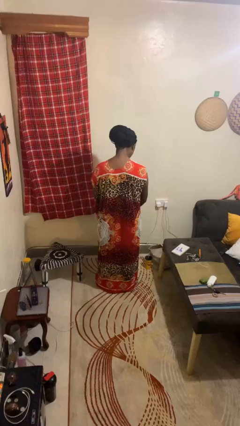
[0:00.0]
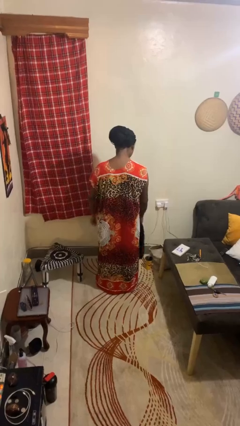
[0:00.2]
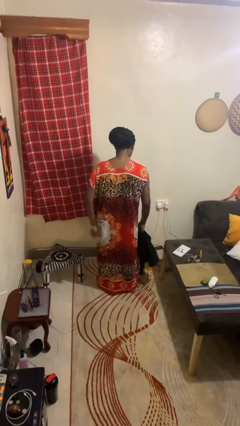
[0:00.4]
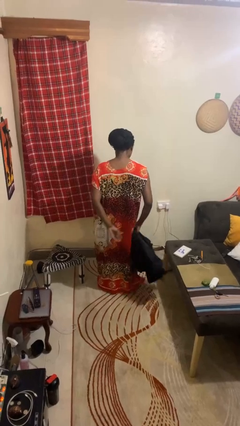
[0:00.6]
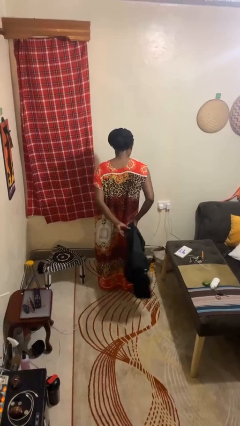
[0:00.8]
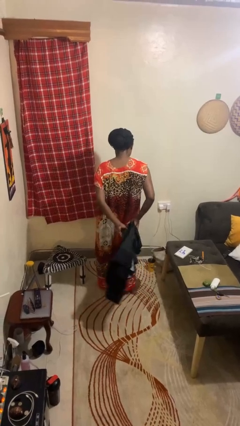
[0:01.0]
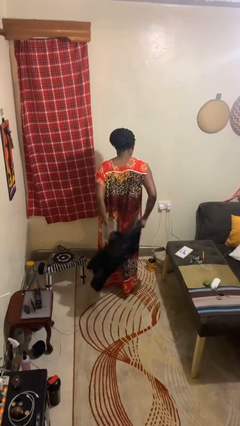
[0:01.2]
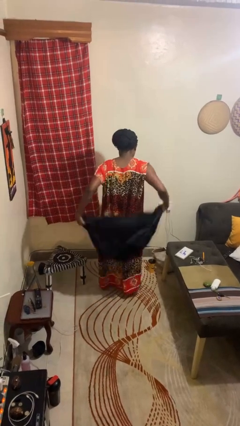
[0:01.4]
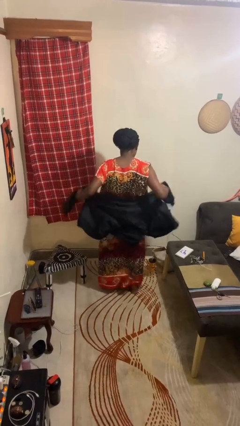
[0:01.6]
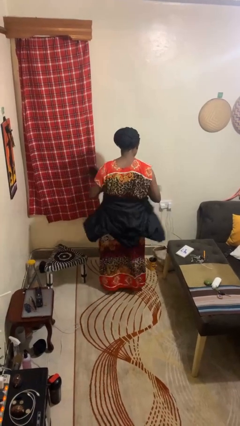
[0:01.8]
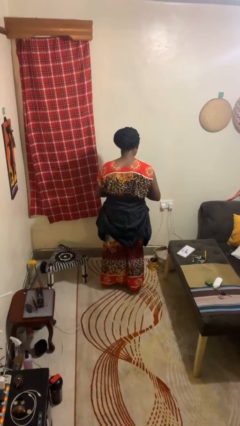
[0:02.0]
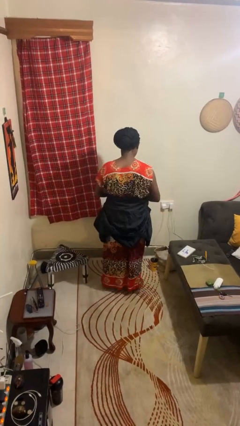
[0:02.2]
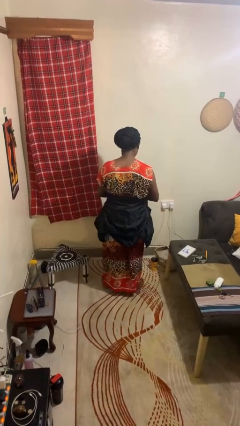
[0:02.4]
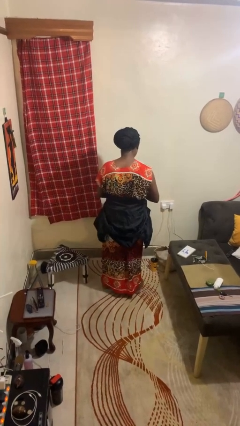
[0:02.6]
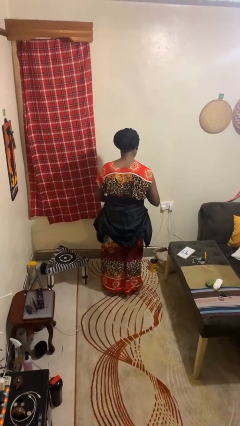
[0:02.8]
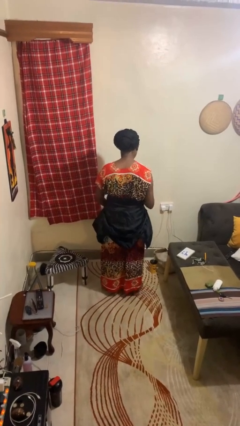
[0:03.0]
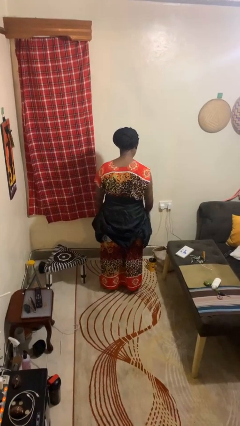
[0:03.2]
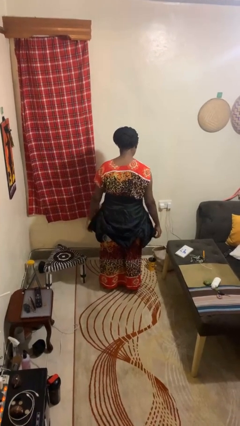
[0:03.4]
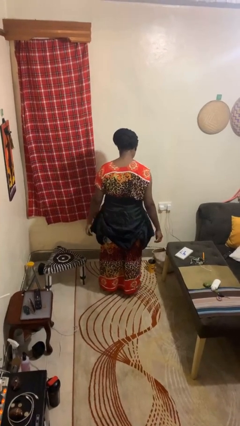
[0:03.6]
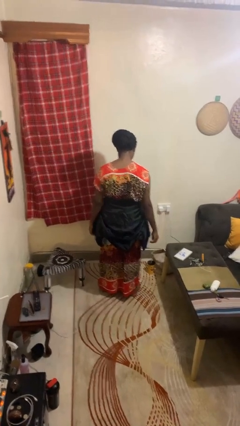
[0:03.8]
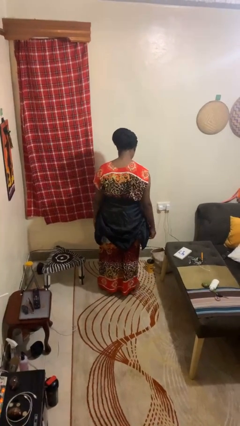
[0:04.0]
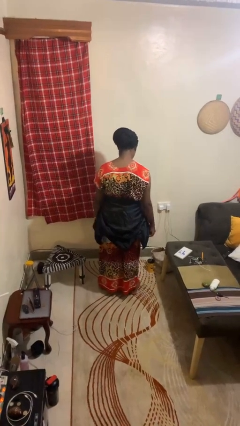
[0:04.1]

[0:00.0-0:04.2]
person ties jacket around waist

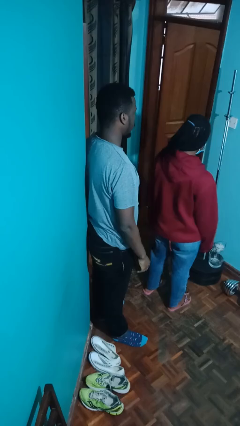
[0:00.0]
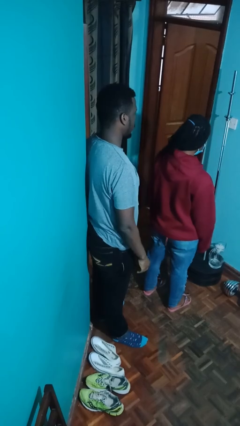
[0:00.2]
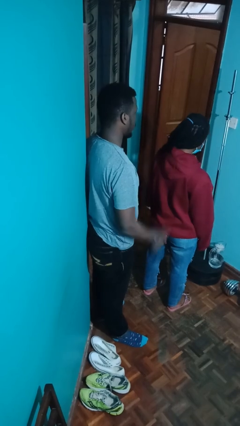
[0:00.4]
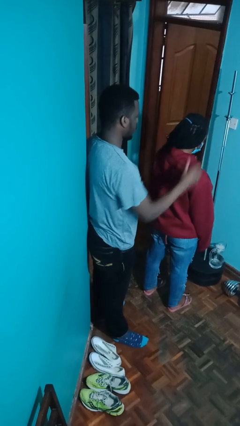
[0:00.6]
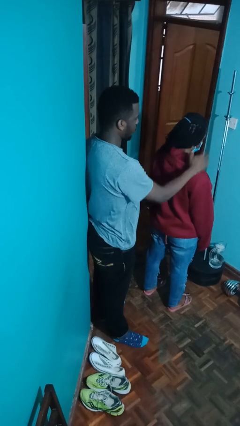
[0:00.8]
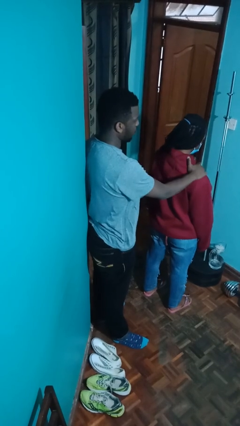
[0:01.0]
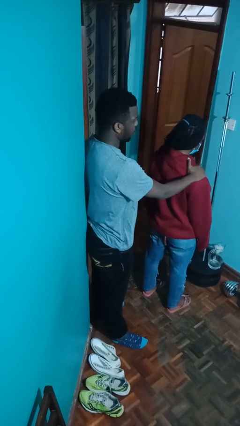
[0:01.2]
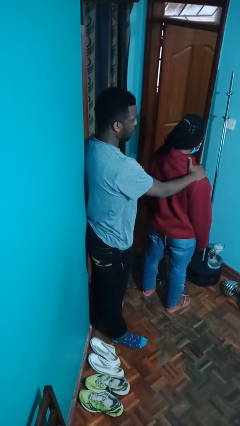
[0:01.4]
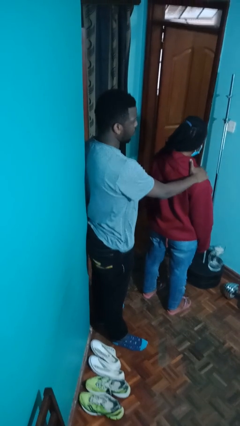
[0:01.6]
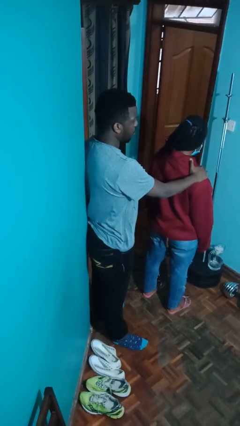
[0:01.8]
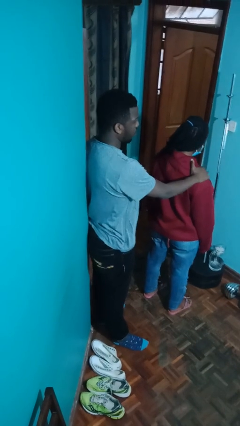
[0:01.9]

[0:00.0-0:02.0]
person grabs person by shoulder

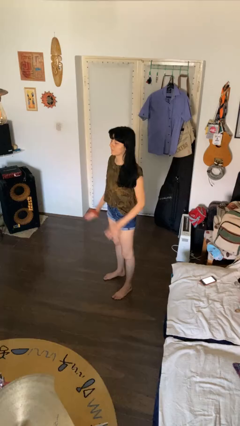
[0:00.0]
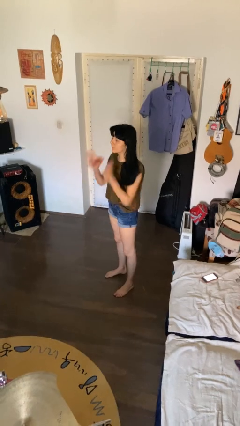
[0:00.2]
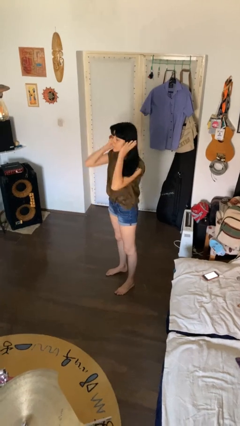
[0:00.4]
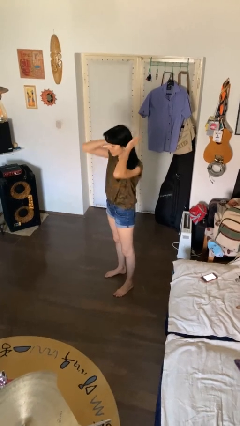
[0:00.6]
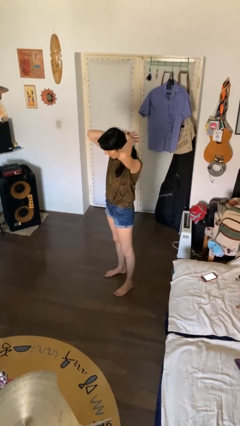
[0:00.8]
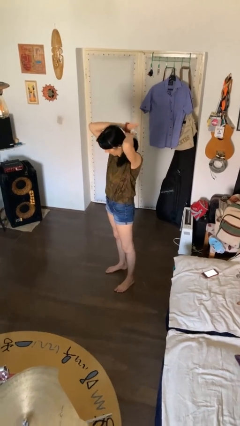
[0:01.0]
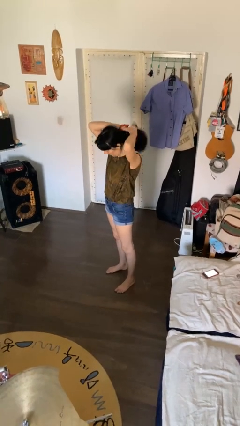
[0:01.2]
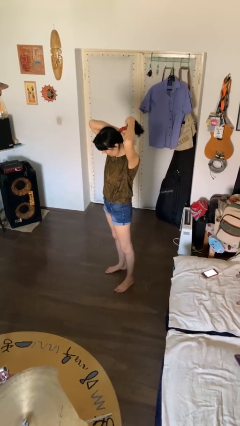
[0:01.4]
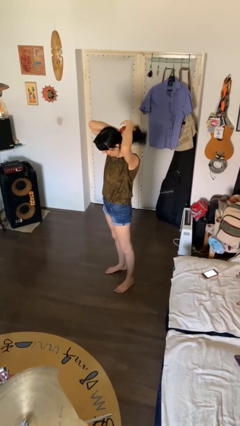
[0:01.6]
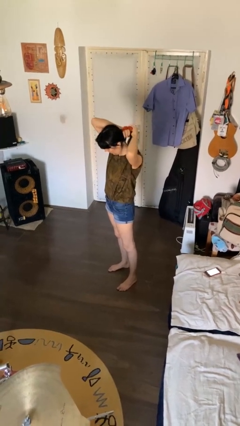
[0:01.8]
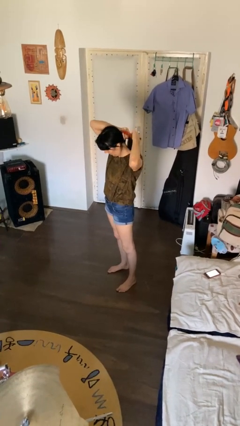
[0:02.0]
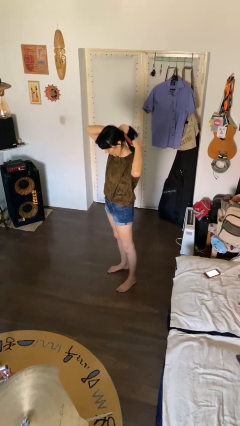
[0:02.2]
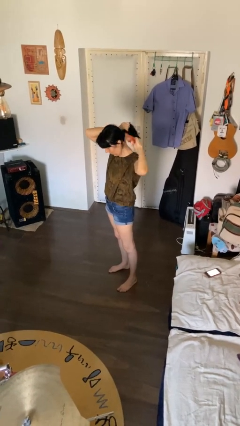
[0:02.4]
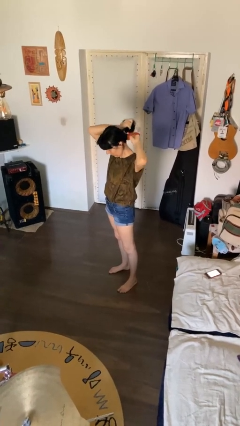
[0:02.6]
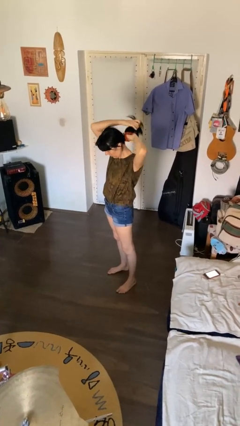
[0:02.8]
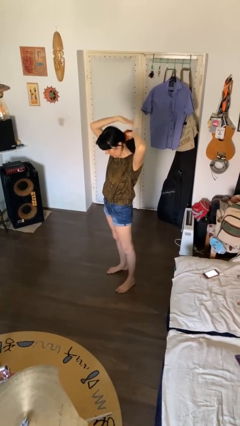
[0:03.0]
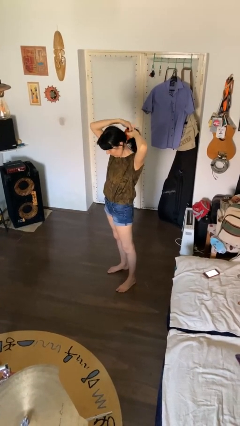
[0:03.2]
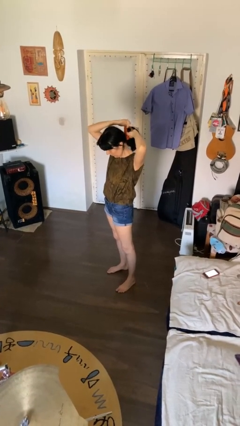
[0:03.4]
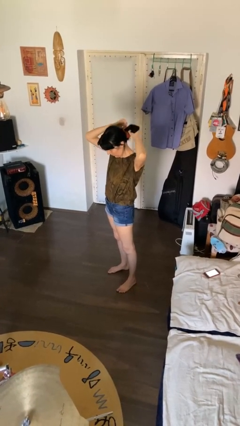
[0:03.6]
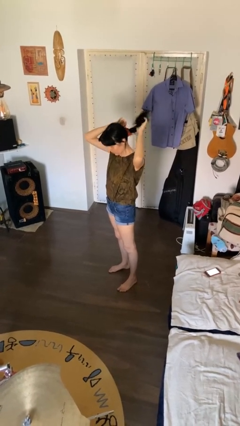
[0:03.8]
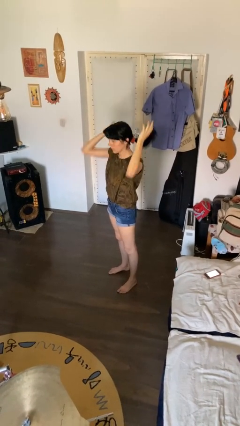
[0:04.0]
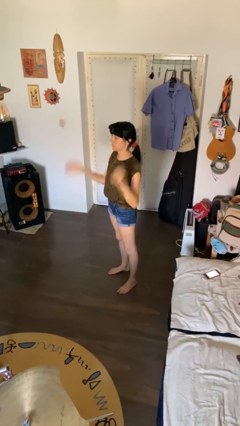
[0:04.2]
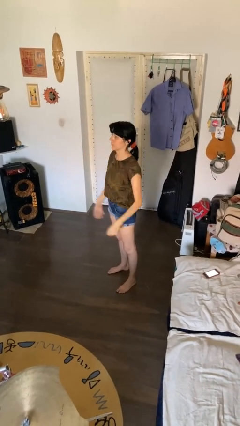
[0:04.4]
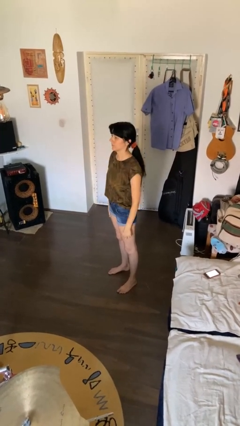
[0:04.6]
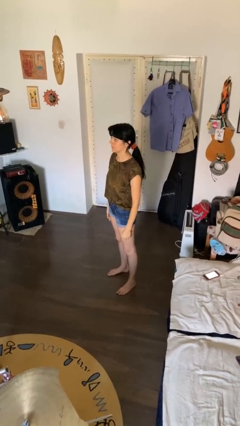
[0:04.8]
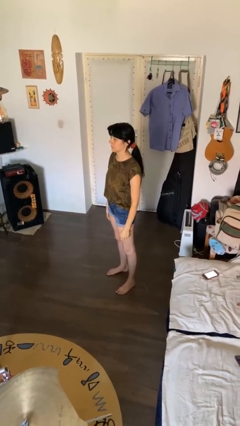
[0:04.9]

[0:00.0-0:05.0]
person puts hair in ponytail

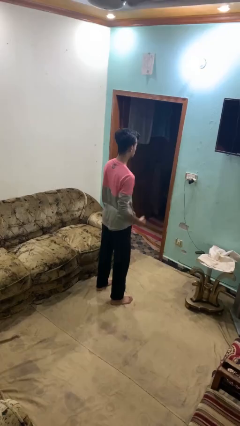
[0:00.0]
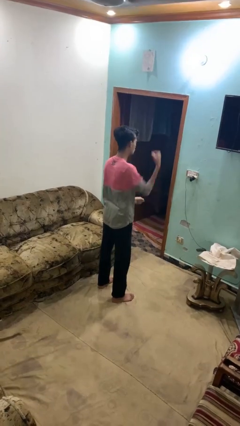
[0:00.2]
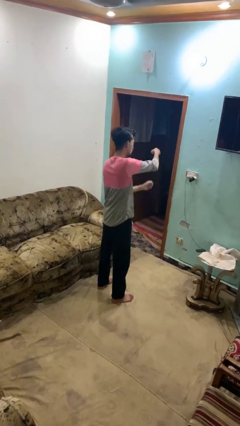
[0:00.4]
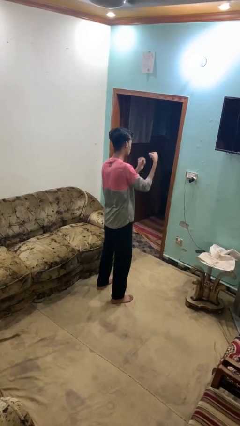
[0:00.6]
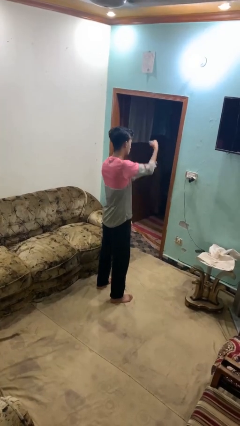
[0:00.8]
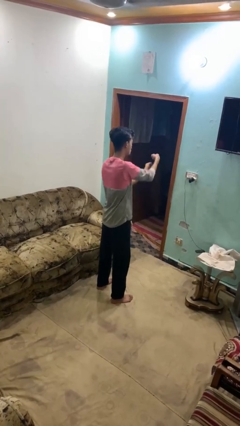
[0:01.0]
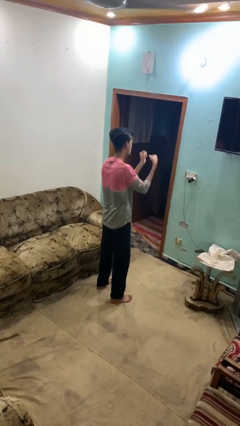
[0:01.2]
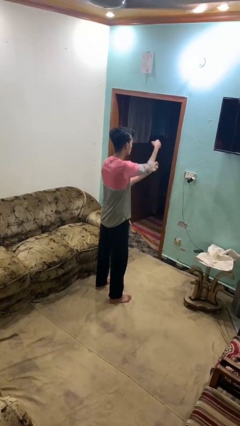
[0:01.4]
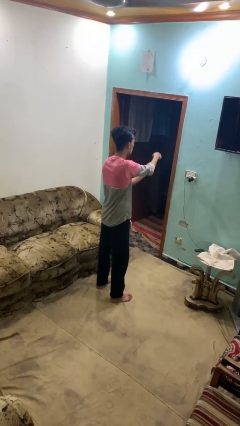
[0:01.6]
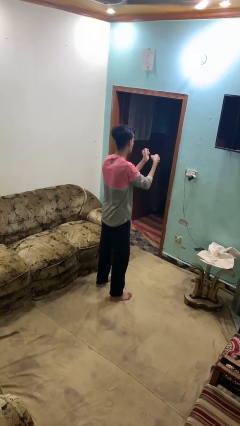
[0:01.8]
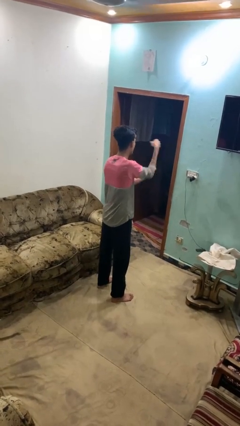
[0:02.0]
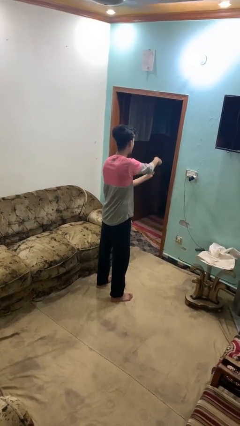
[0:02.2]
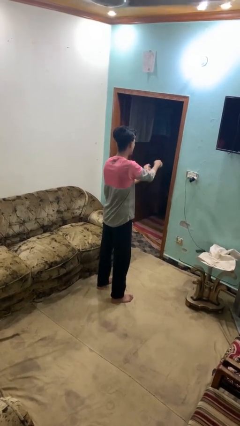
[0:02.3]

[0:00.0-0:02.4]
person punches

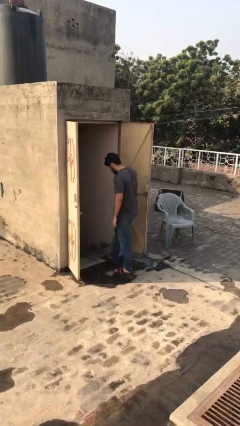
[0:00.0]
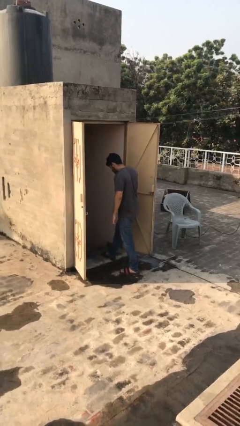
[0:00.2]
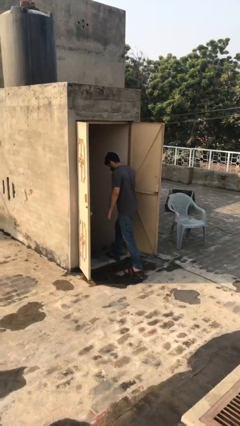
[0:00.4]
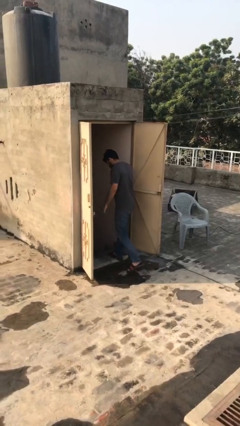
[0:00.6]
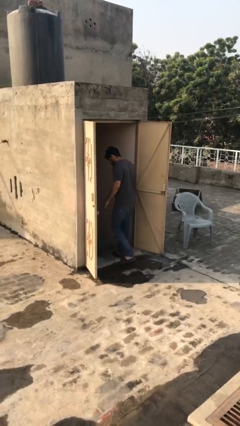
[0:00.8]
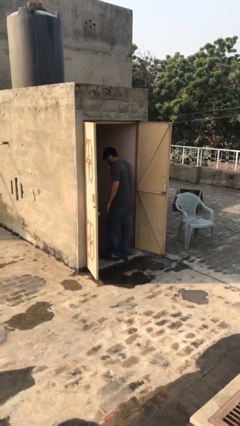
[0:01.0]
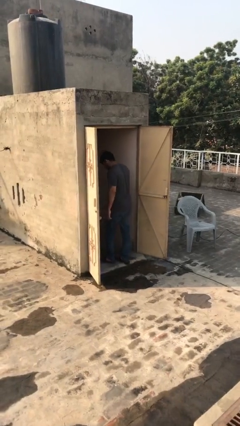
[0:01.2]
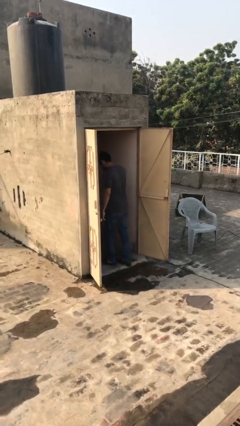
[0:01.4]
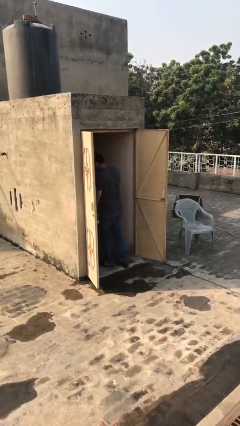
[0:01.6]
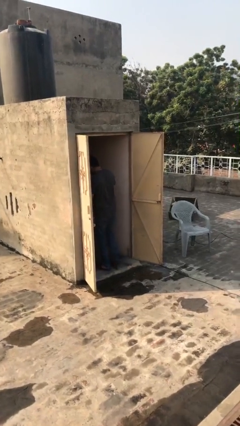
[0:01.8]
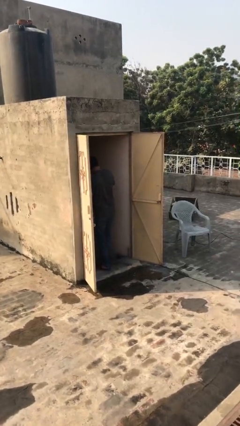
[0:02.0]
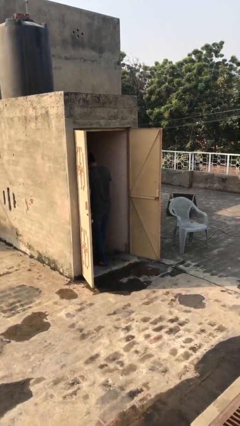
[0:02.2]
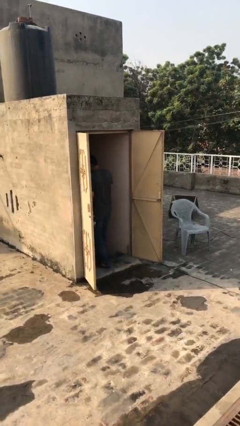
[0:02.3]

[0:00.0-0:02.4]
person exits scene through structure

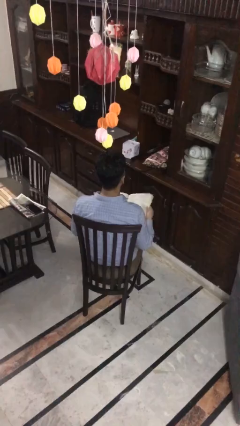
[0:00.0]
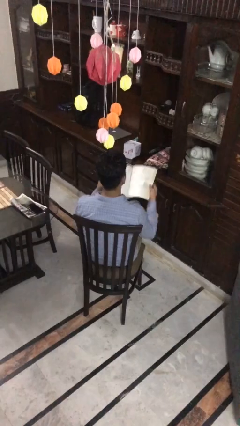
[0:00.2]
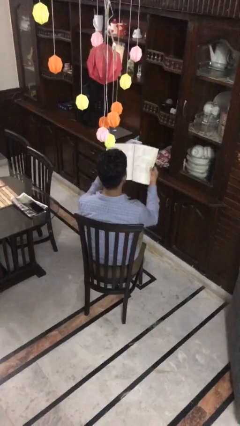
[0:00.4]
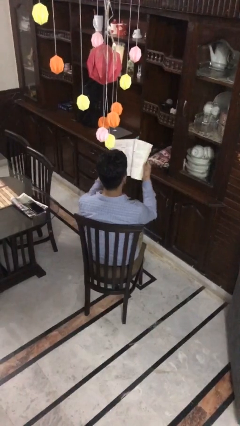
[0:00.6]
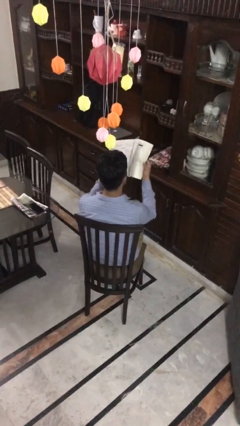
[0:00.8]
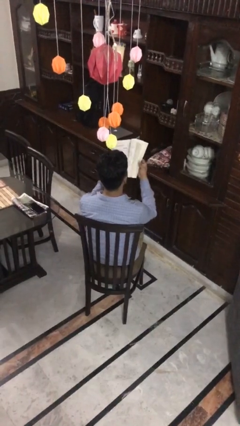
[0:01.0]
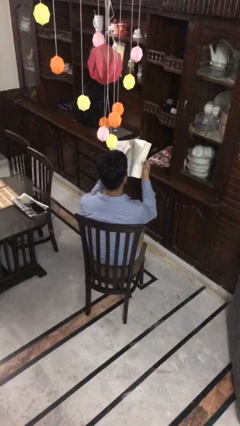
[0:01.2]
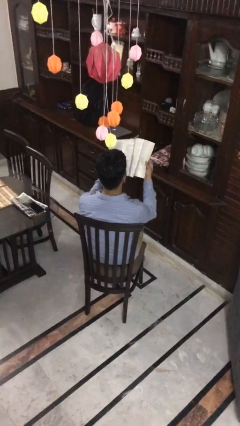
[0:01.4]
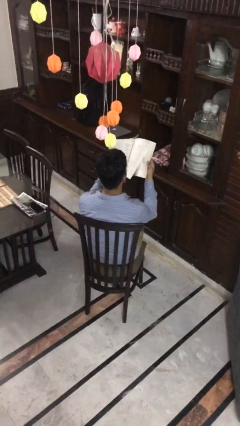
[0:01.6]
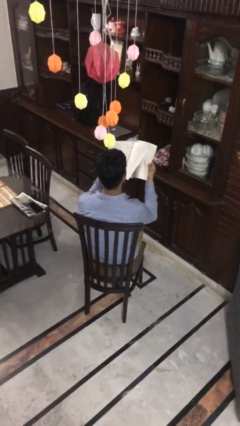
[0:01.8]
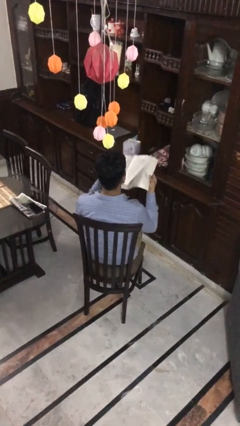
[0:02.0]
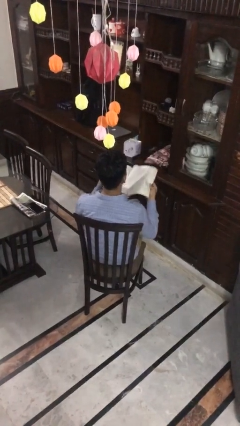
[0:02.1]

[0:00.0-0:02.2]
person reads magazine
